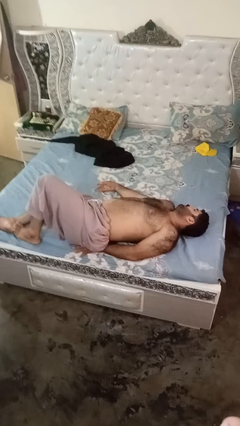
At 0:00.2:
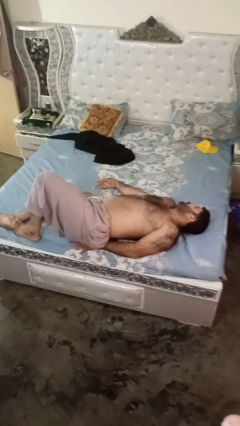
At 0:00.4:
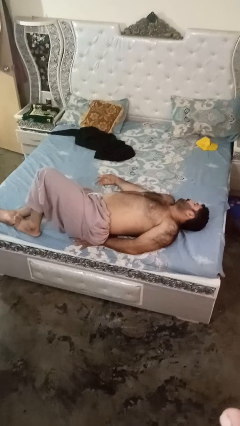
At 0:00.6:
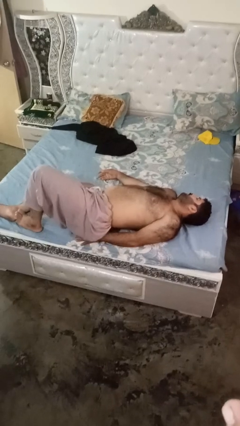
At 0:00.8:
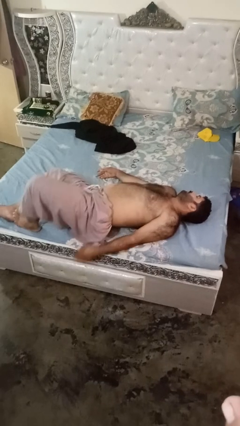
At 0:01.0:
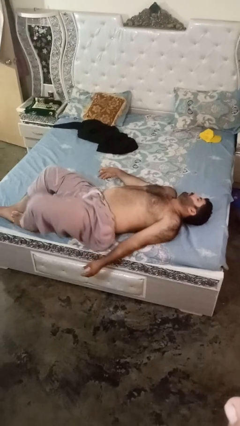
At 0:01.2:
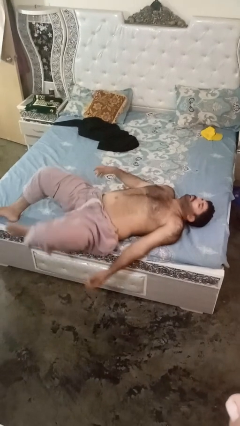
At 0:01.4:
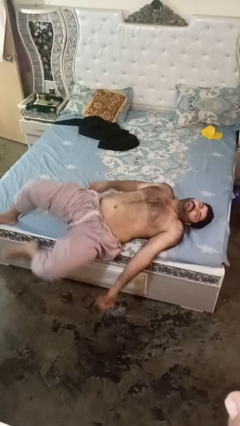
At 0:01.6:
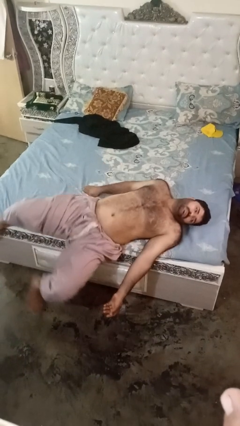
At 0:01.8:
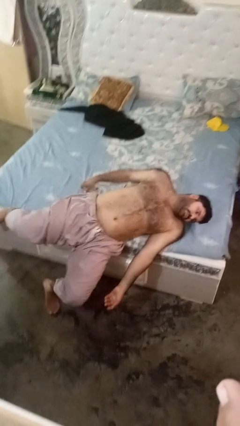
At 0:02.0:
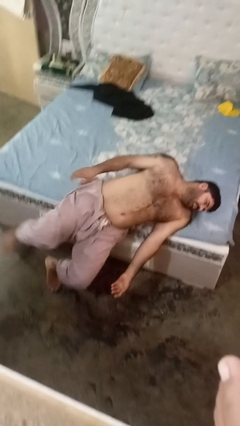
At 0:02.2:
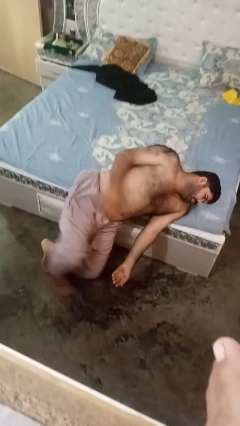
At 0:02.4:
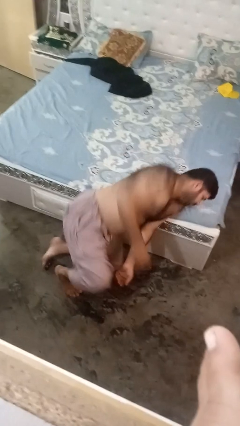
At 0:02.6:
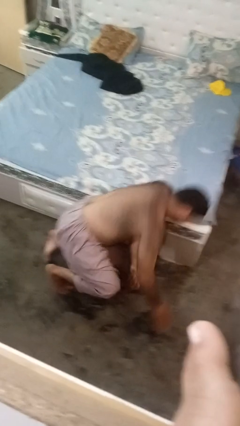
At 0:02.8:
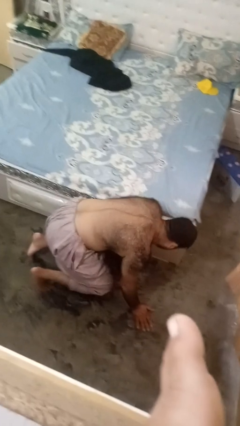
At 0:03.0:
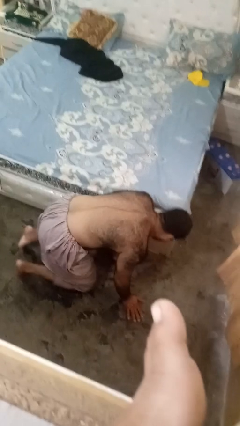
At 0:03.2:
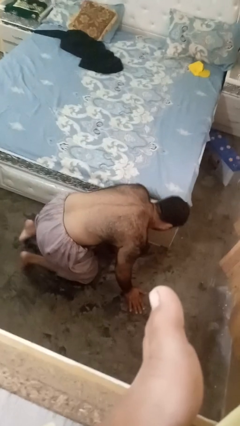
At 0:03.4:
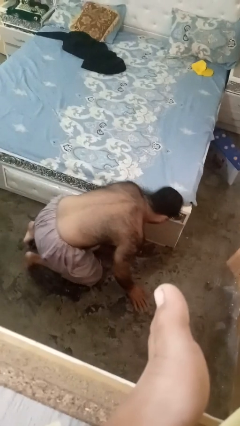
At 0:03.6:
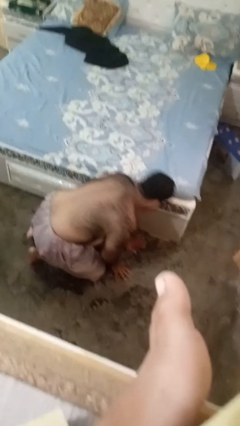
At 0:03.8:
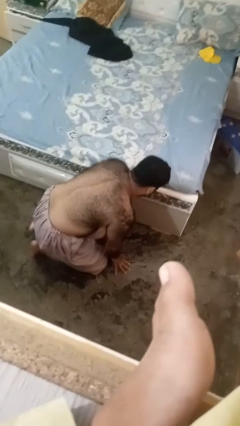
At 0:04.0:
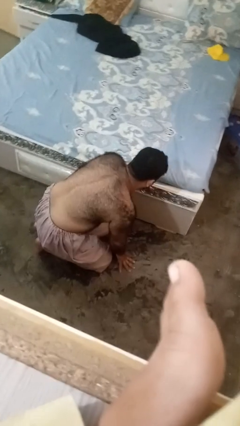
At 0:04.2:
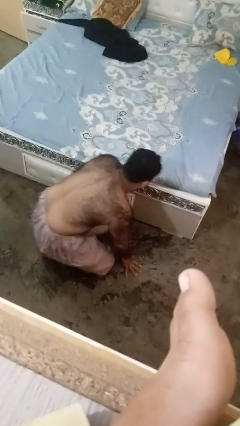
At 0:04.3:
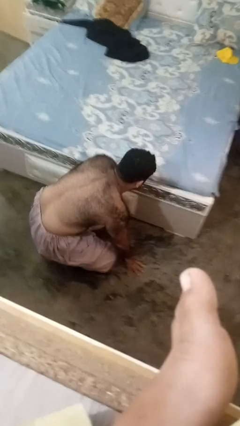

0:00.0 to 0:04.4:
person falls from bed

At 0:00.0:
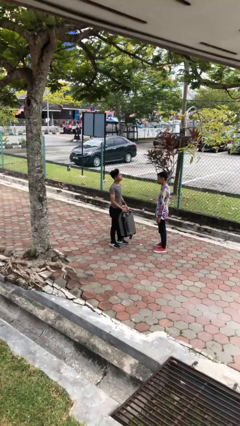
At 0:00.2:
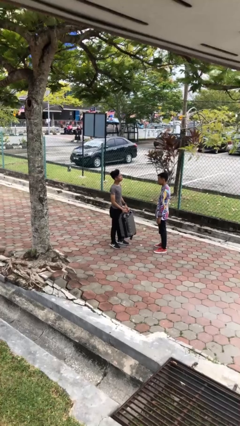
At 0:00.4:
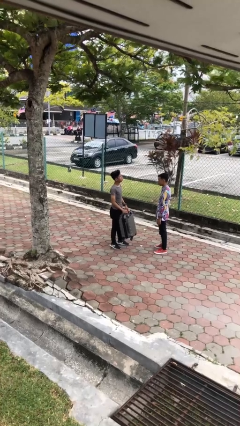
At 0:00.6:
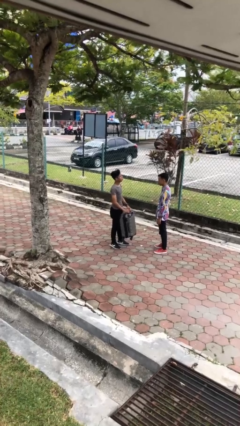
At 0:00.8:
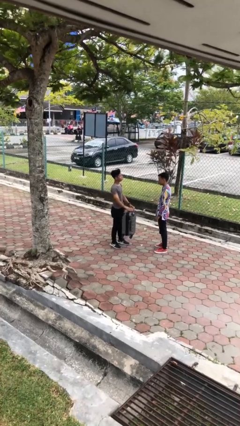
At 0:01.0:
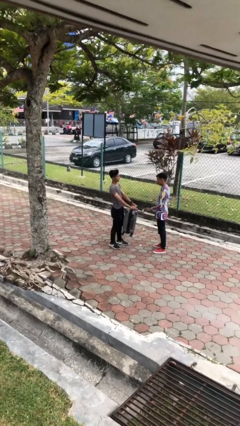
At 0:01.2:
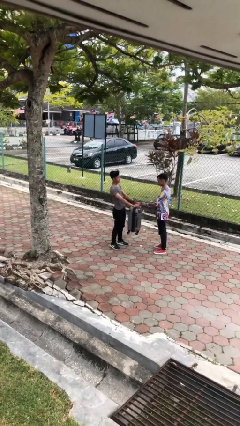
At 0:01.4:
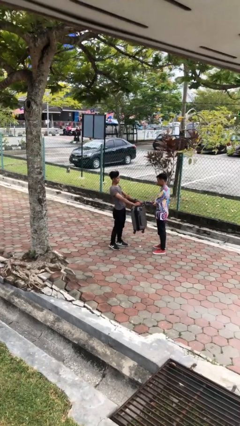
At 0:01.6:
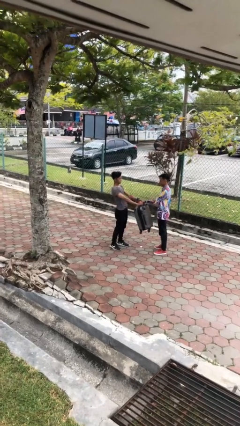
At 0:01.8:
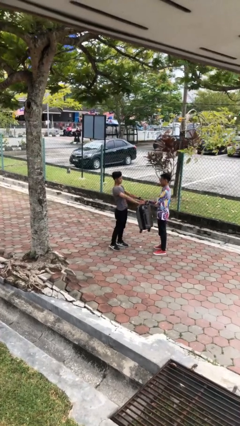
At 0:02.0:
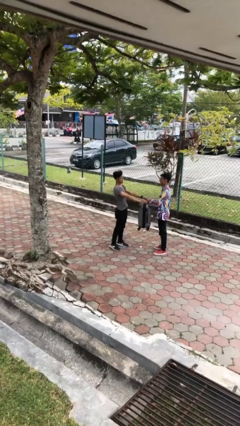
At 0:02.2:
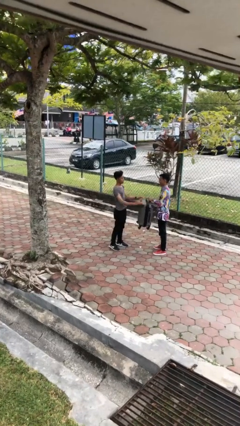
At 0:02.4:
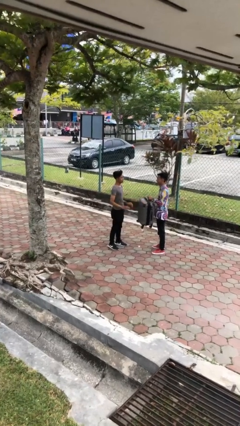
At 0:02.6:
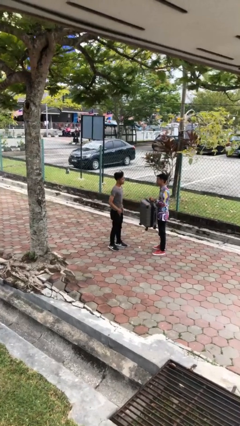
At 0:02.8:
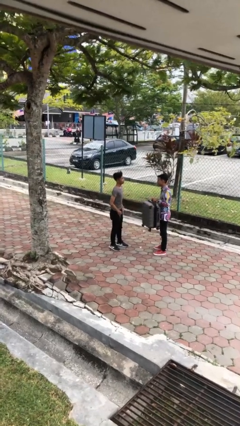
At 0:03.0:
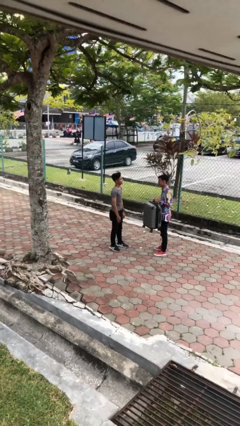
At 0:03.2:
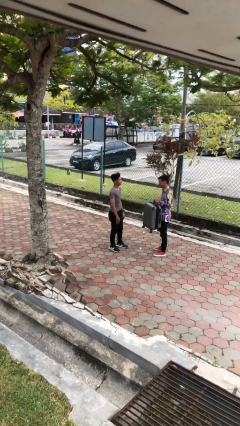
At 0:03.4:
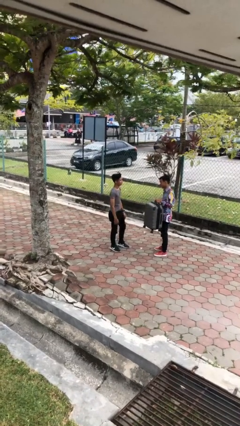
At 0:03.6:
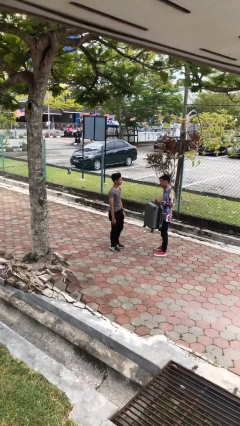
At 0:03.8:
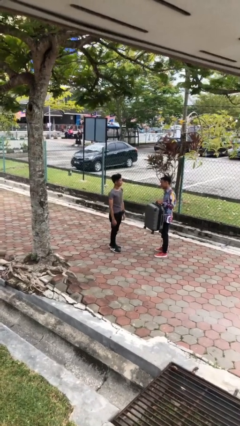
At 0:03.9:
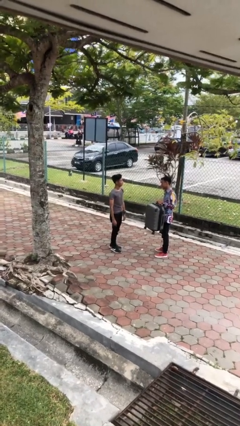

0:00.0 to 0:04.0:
person transfers object to person

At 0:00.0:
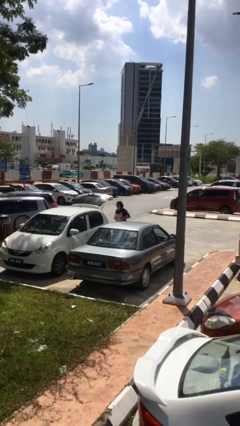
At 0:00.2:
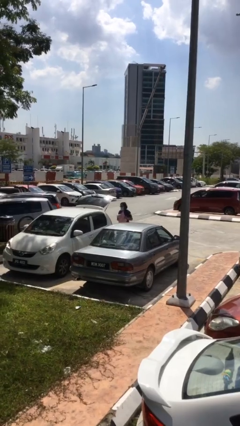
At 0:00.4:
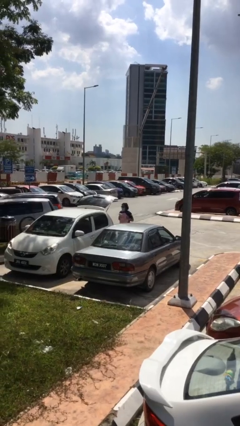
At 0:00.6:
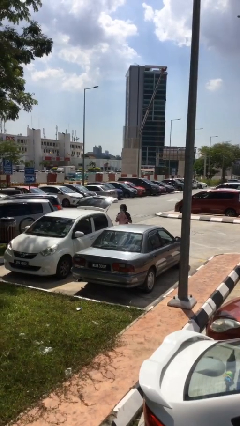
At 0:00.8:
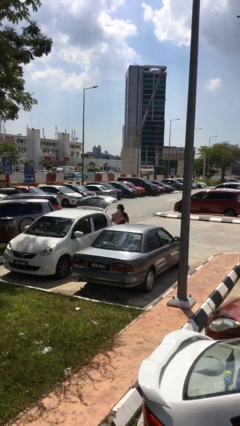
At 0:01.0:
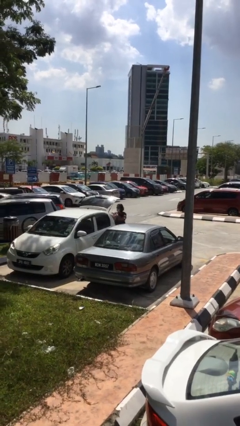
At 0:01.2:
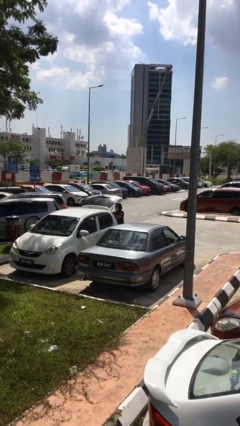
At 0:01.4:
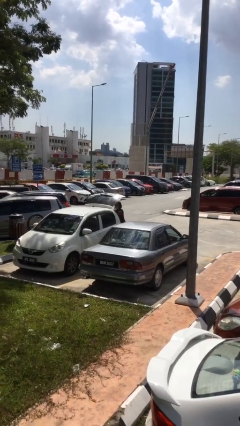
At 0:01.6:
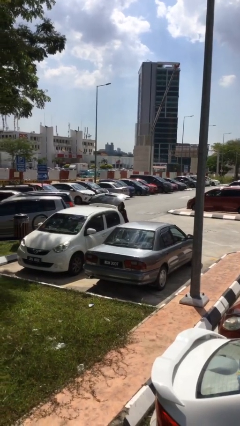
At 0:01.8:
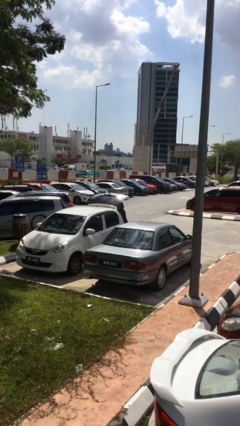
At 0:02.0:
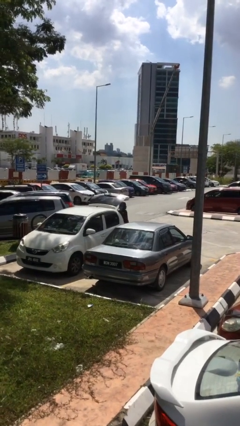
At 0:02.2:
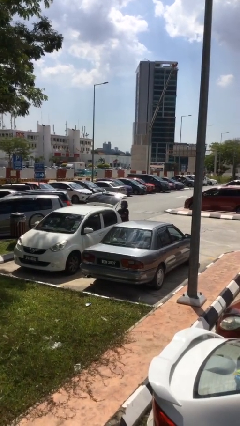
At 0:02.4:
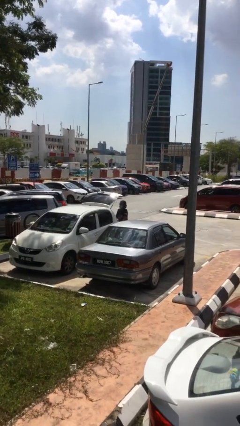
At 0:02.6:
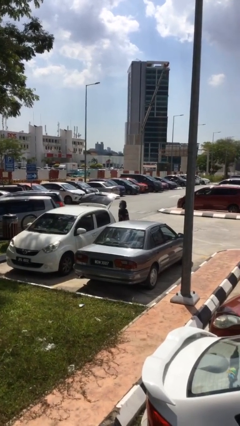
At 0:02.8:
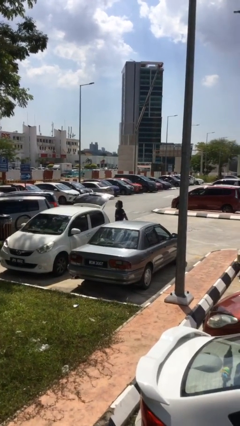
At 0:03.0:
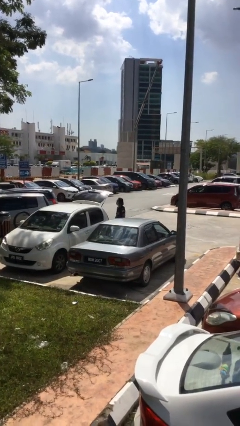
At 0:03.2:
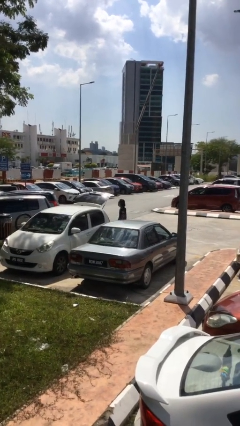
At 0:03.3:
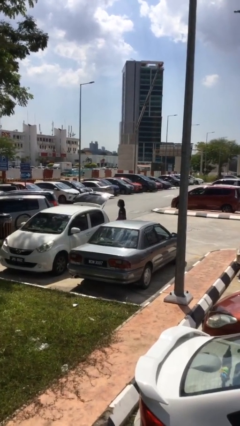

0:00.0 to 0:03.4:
person loads car

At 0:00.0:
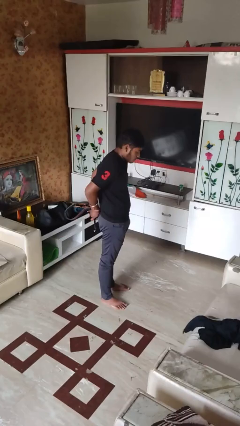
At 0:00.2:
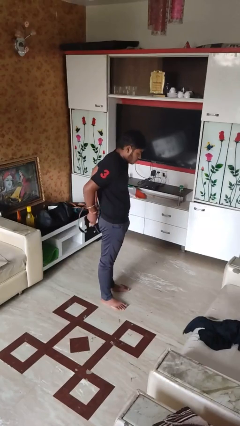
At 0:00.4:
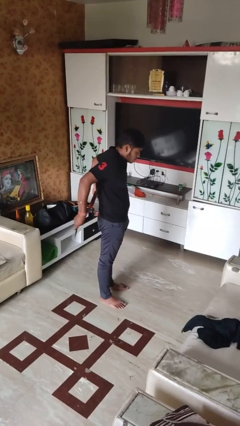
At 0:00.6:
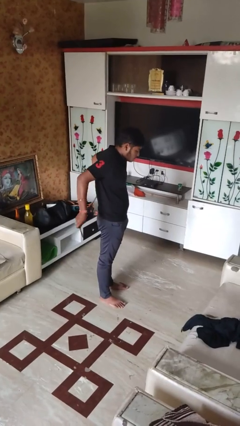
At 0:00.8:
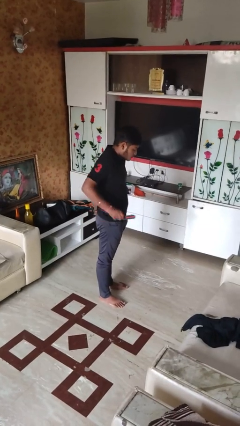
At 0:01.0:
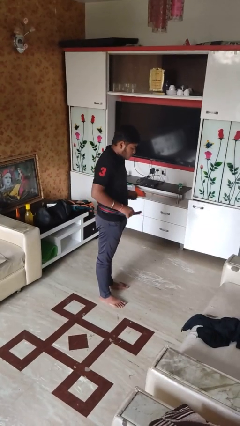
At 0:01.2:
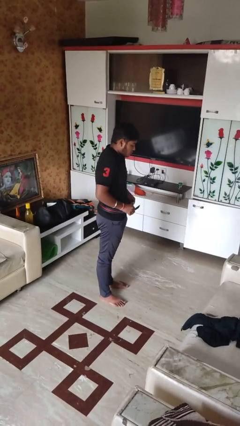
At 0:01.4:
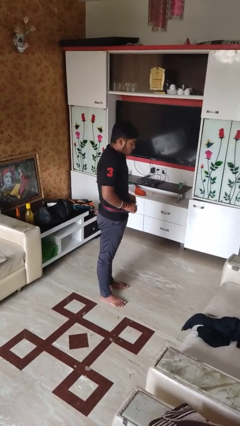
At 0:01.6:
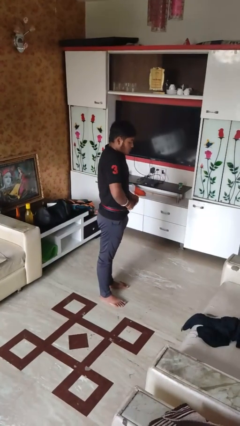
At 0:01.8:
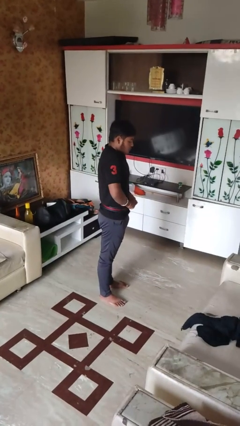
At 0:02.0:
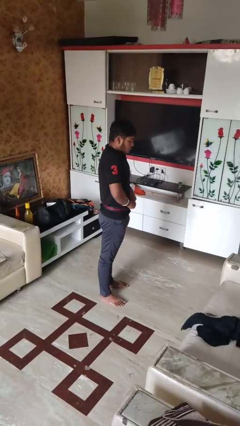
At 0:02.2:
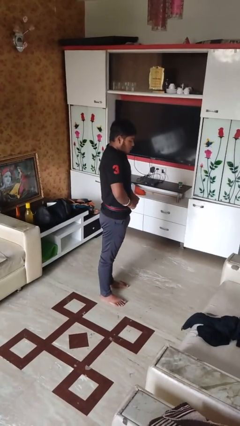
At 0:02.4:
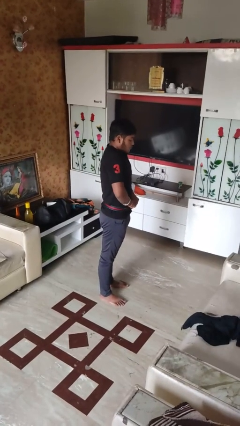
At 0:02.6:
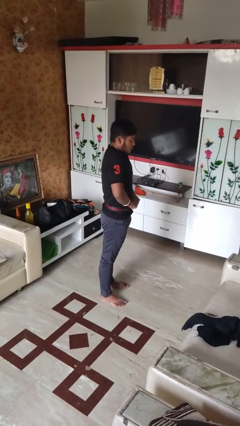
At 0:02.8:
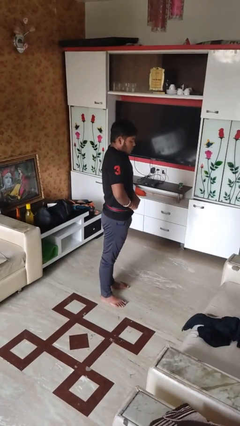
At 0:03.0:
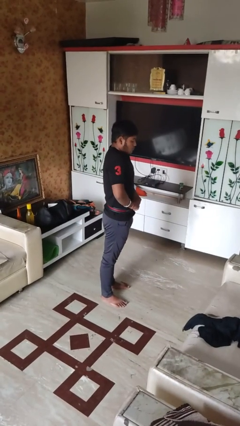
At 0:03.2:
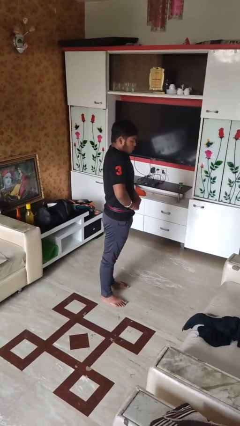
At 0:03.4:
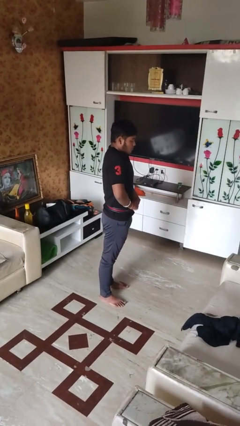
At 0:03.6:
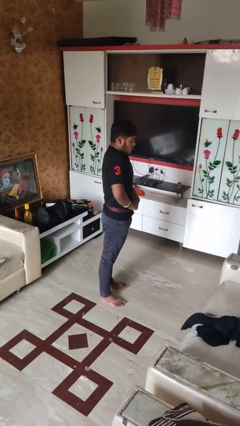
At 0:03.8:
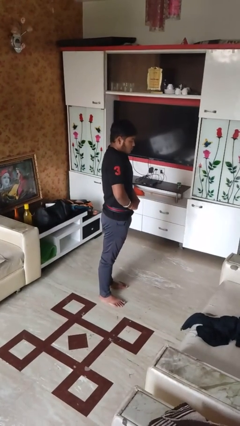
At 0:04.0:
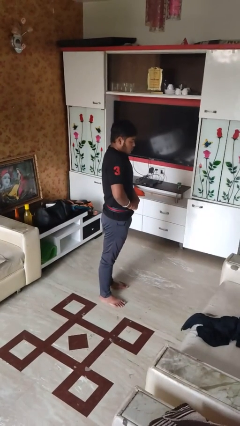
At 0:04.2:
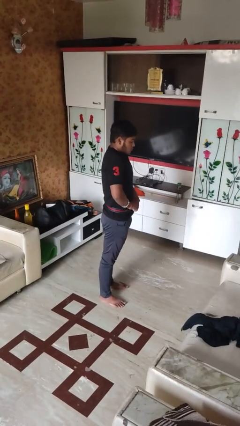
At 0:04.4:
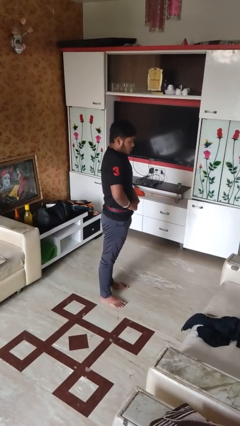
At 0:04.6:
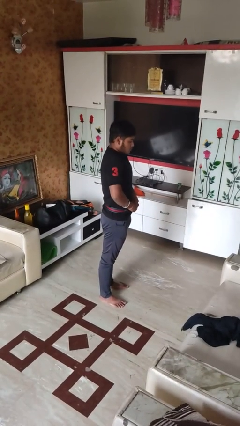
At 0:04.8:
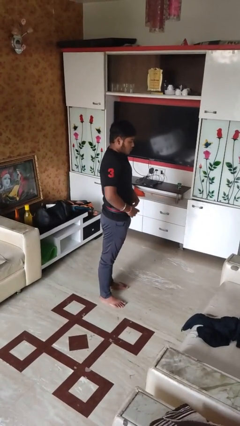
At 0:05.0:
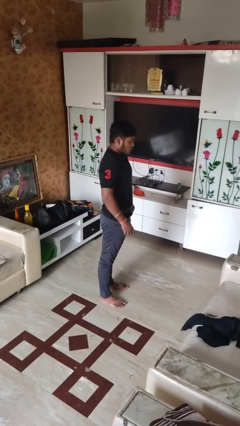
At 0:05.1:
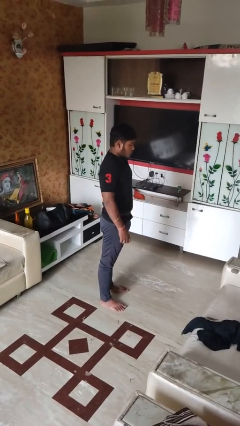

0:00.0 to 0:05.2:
person puts on belt

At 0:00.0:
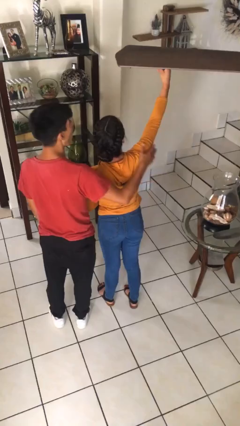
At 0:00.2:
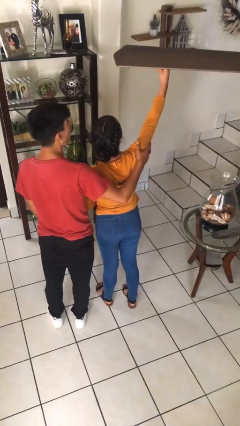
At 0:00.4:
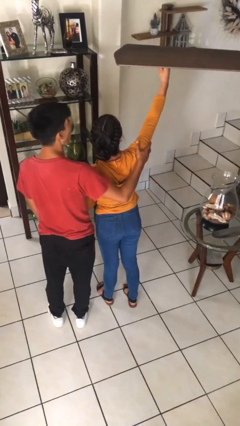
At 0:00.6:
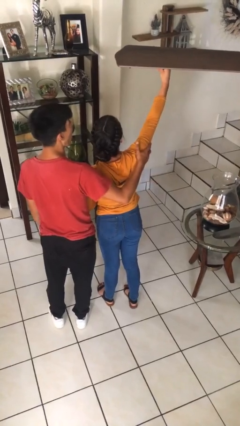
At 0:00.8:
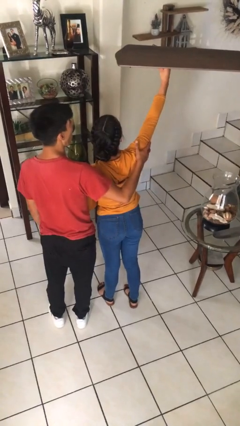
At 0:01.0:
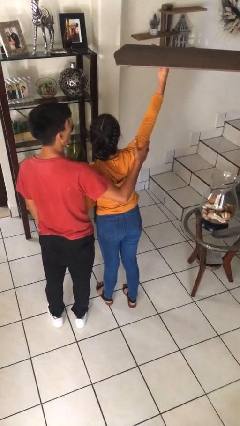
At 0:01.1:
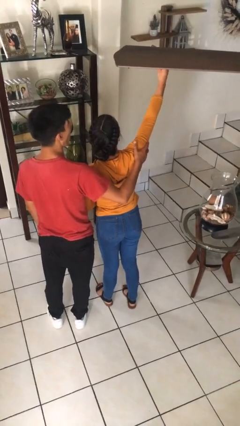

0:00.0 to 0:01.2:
person takes selfie with person
